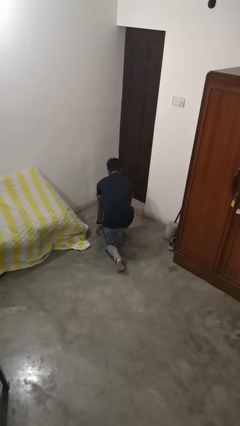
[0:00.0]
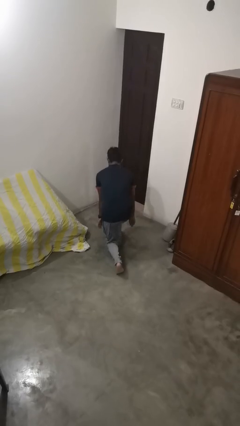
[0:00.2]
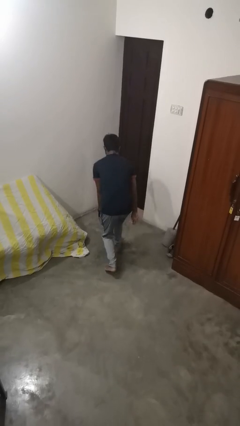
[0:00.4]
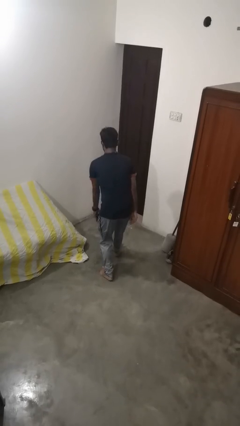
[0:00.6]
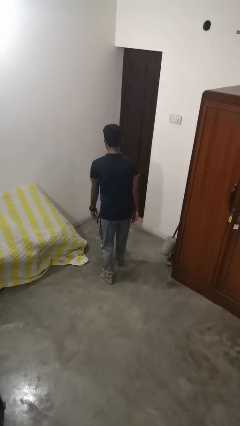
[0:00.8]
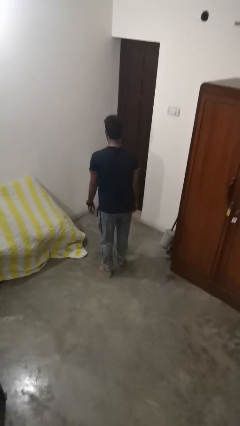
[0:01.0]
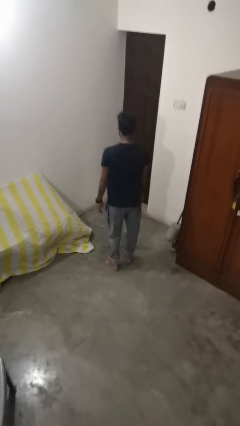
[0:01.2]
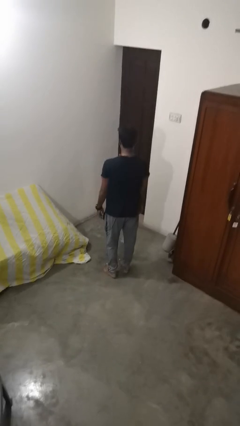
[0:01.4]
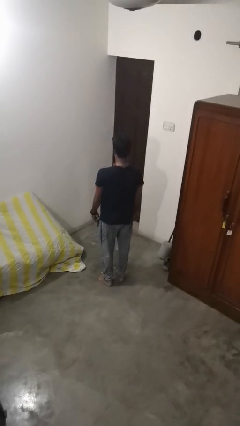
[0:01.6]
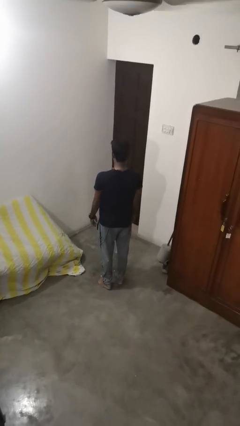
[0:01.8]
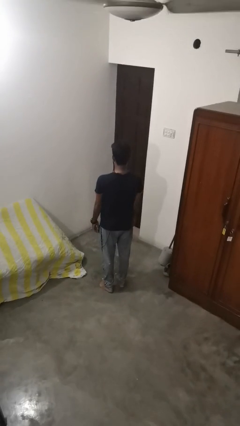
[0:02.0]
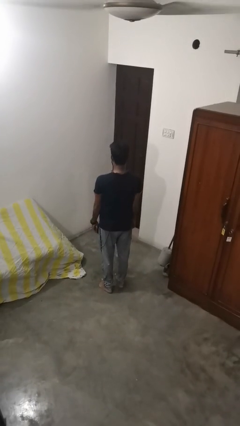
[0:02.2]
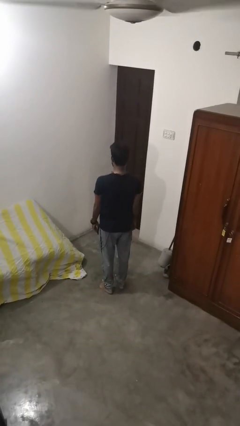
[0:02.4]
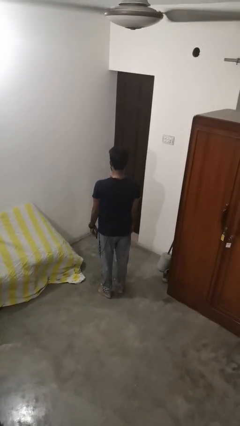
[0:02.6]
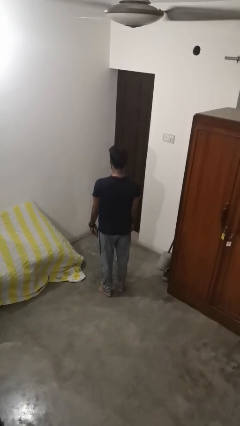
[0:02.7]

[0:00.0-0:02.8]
person stands up from floor

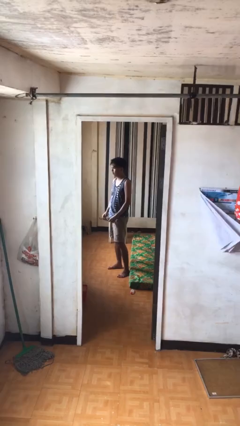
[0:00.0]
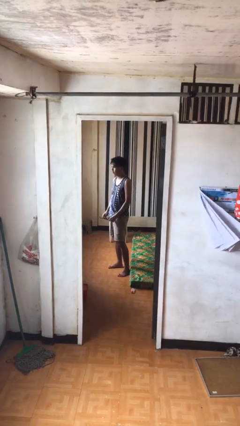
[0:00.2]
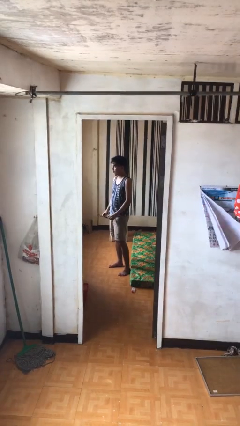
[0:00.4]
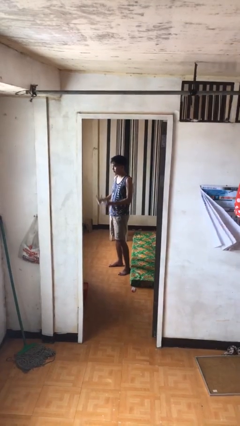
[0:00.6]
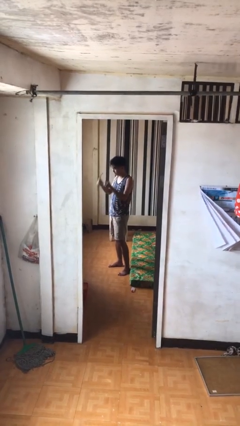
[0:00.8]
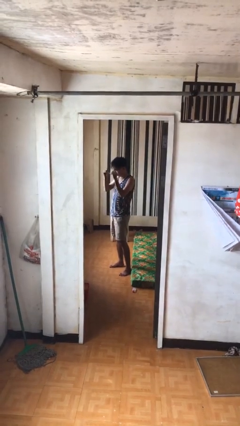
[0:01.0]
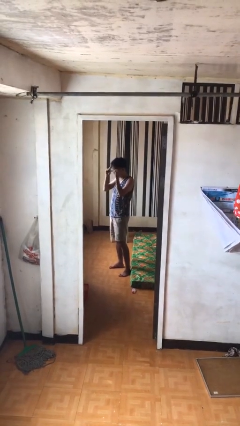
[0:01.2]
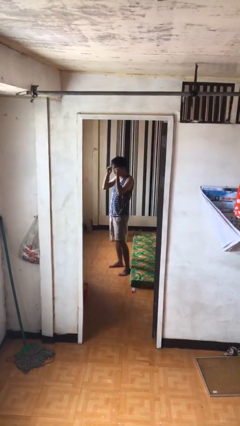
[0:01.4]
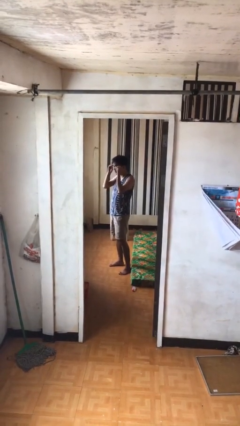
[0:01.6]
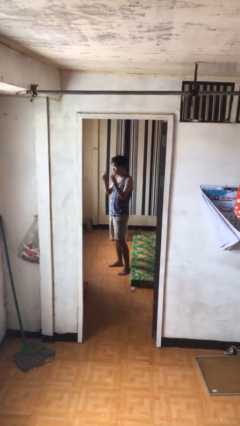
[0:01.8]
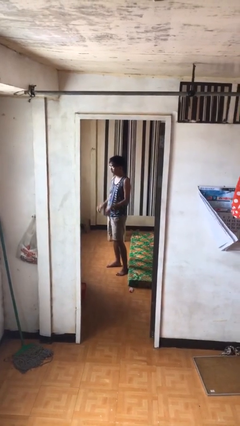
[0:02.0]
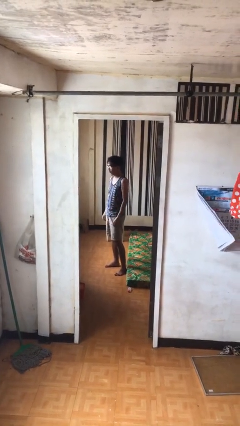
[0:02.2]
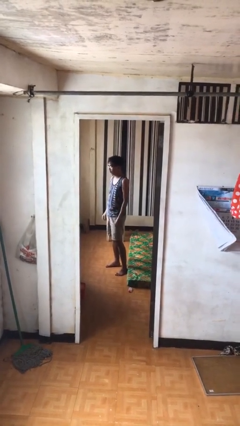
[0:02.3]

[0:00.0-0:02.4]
person puts on glasses

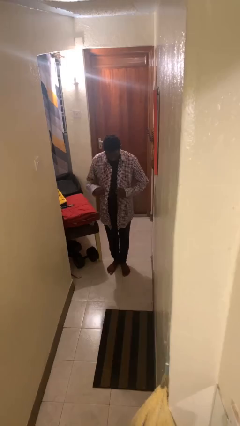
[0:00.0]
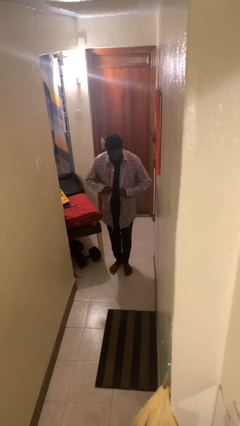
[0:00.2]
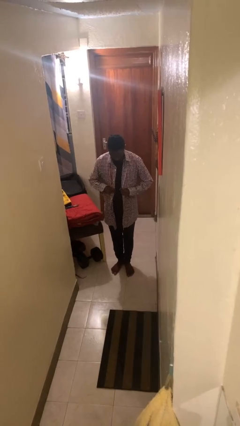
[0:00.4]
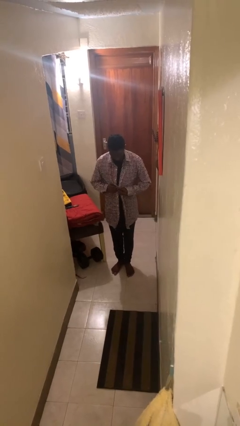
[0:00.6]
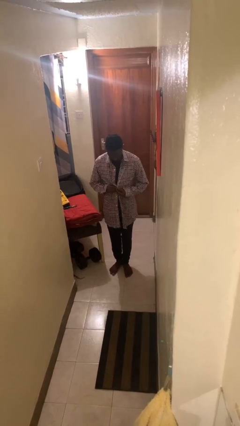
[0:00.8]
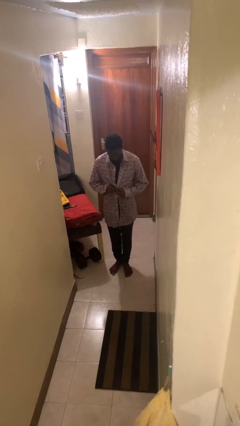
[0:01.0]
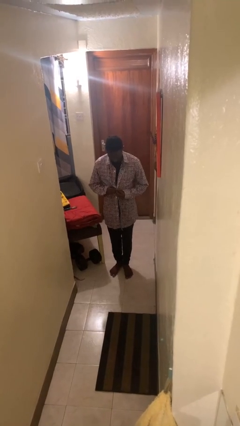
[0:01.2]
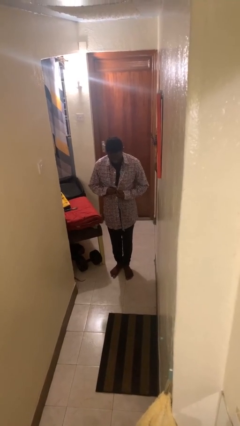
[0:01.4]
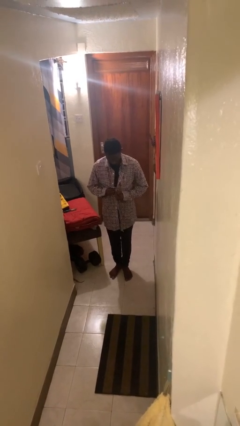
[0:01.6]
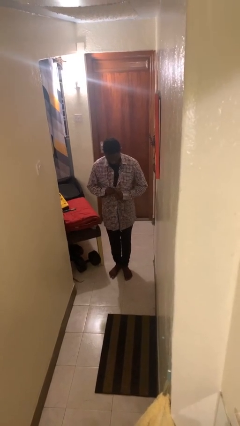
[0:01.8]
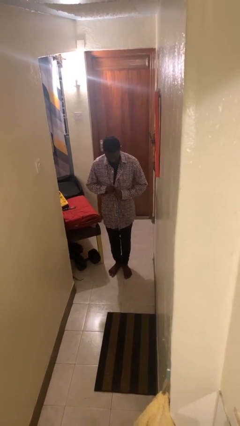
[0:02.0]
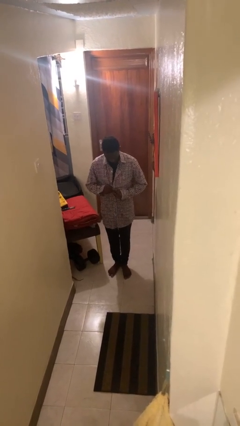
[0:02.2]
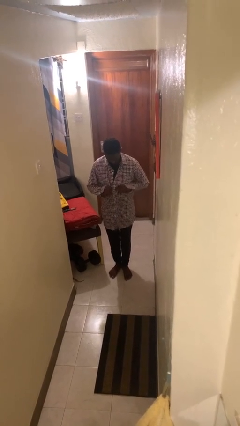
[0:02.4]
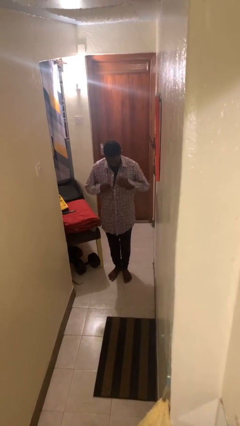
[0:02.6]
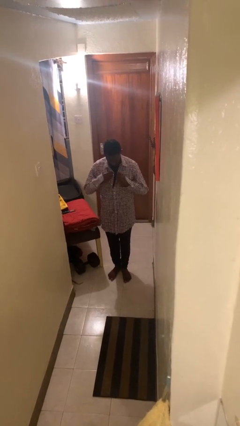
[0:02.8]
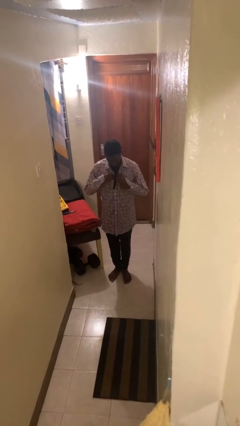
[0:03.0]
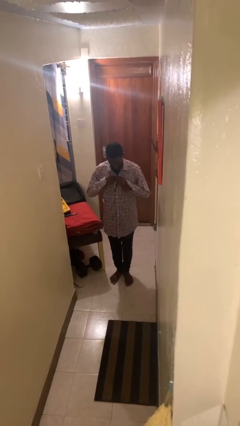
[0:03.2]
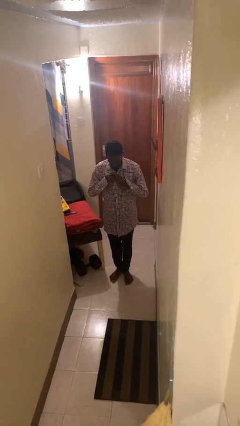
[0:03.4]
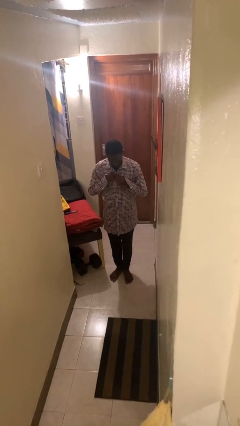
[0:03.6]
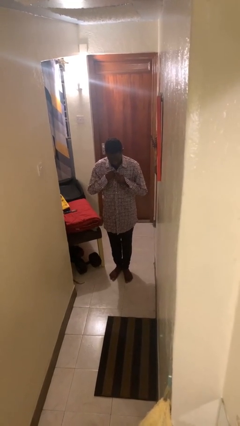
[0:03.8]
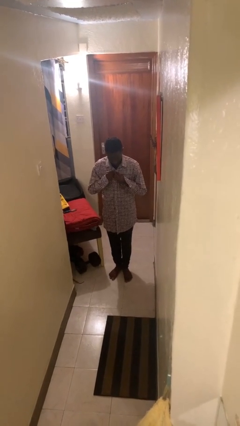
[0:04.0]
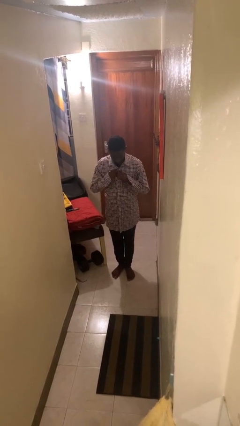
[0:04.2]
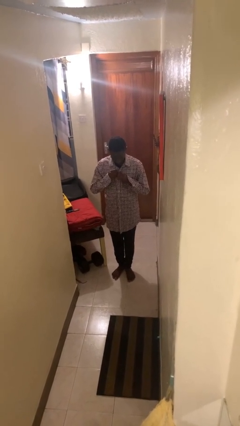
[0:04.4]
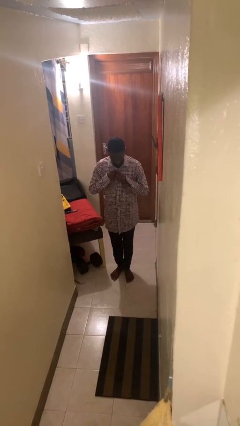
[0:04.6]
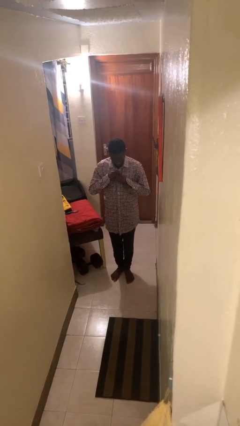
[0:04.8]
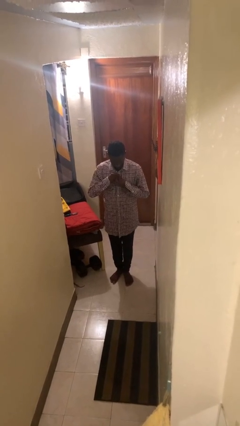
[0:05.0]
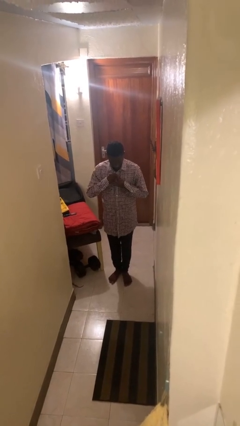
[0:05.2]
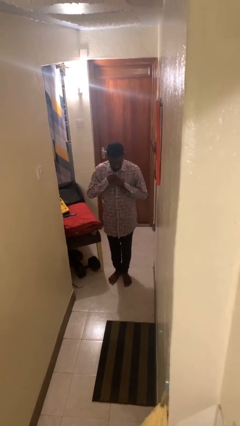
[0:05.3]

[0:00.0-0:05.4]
person buttons shirt

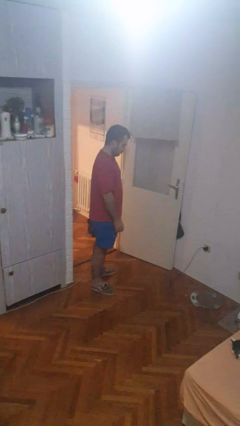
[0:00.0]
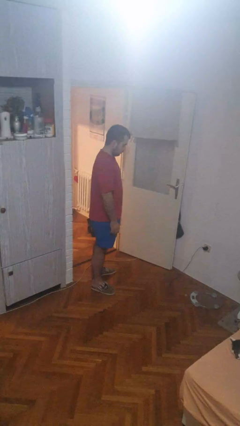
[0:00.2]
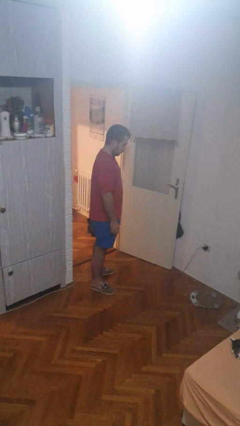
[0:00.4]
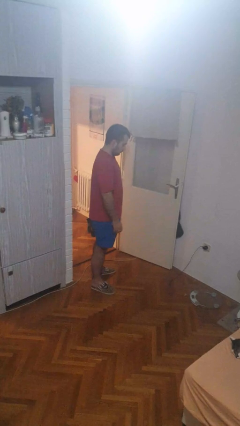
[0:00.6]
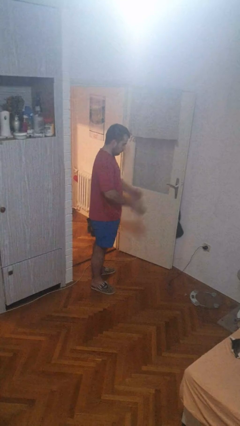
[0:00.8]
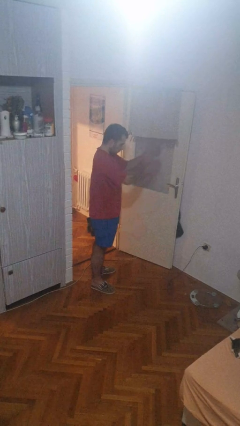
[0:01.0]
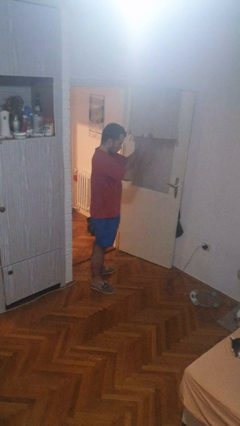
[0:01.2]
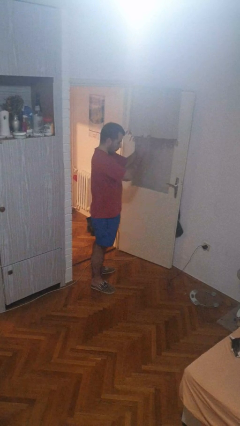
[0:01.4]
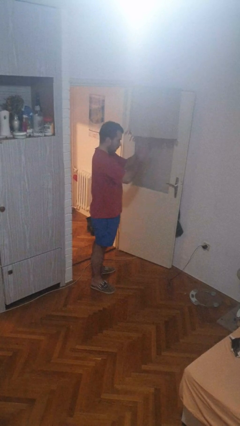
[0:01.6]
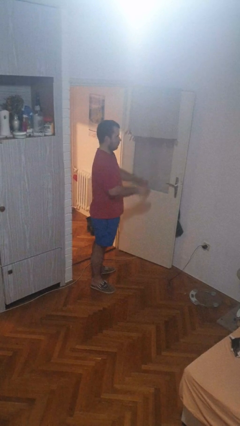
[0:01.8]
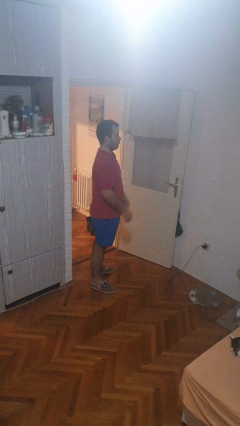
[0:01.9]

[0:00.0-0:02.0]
person claps hands

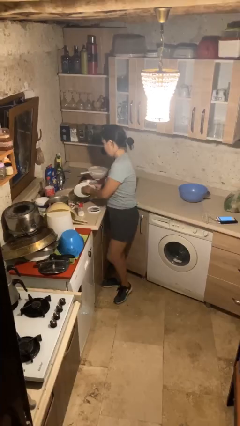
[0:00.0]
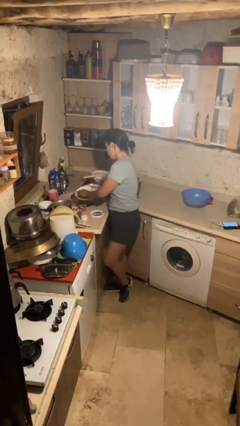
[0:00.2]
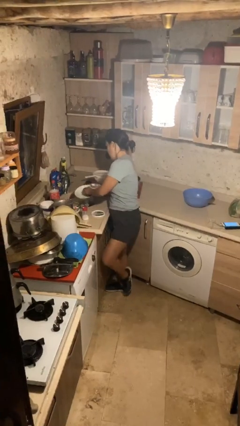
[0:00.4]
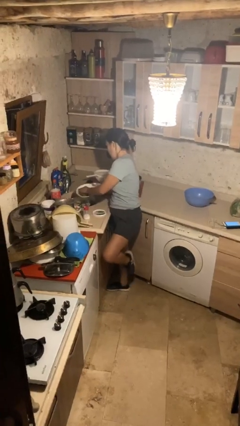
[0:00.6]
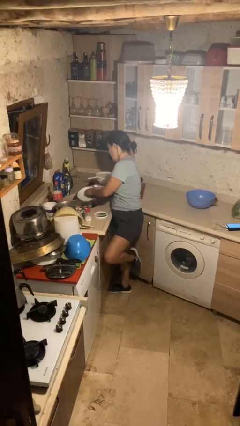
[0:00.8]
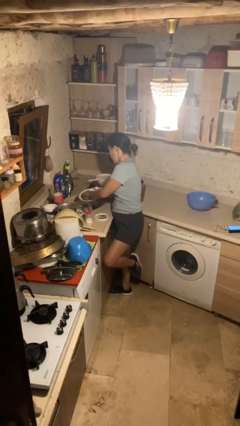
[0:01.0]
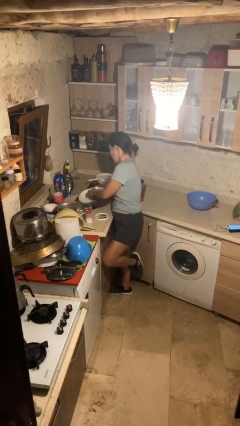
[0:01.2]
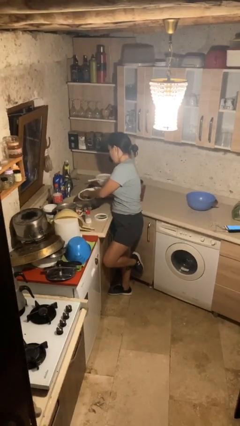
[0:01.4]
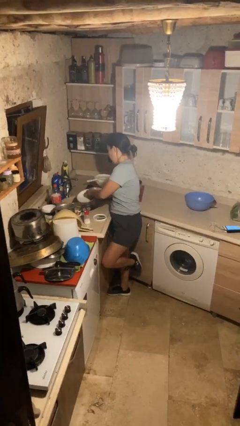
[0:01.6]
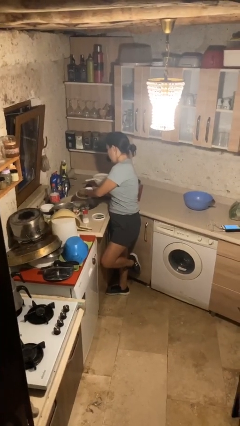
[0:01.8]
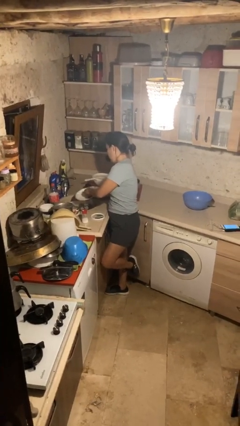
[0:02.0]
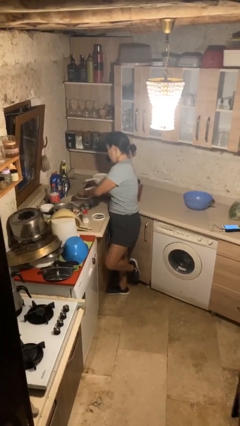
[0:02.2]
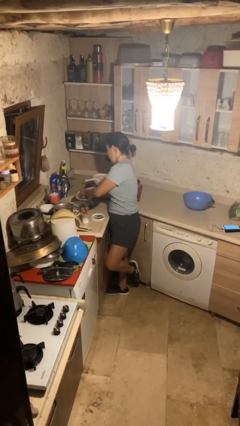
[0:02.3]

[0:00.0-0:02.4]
person washes dish

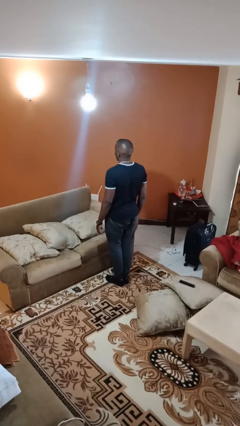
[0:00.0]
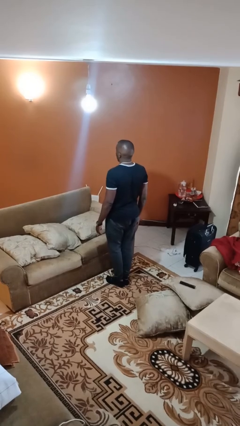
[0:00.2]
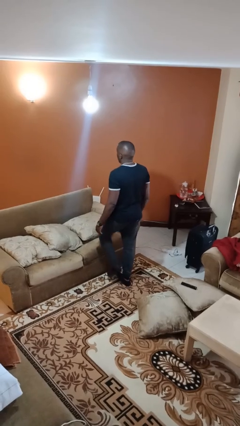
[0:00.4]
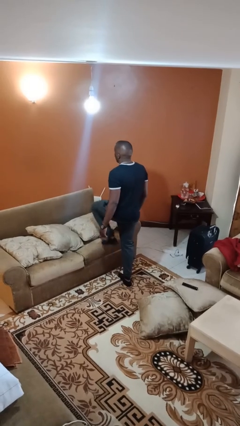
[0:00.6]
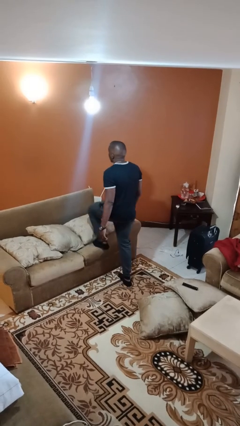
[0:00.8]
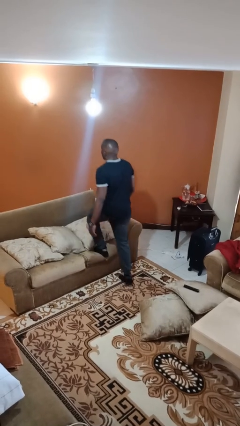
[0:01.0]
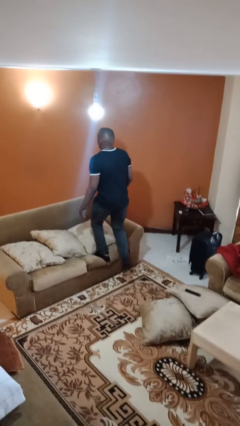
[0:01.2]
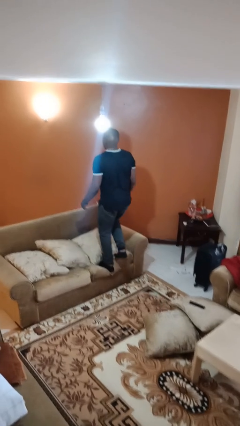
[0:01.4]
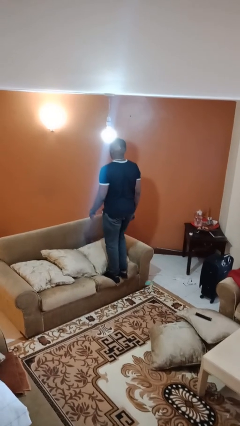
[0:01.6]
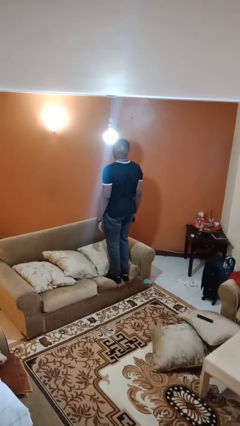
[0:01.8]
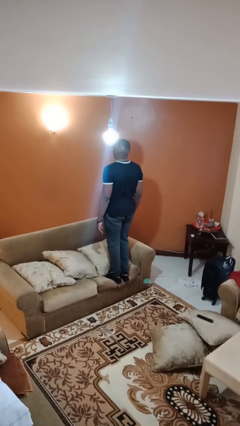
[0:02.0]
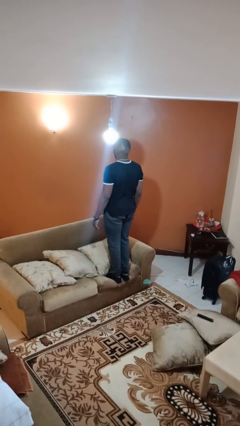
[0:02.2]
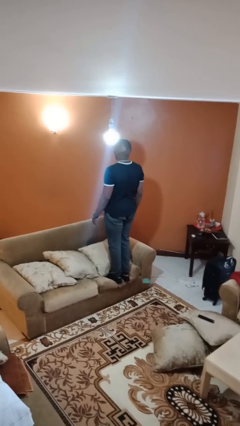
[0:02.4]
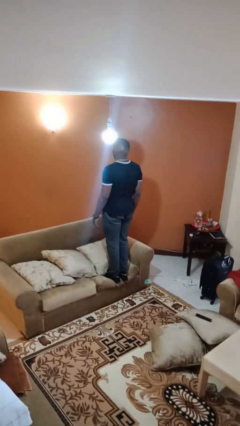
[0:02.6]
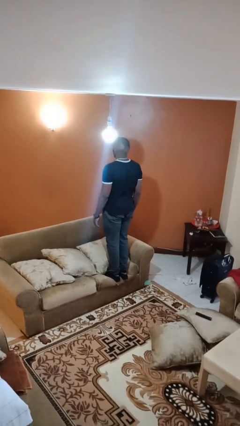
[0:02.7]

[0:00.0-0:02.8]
person climbs on couch
